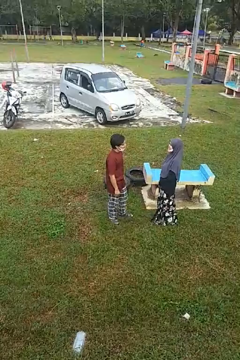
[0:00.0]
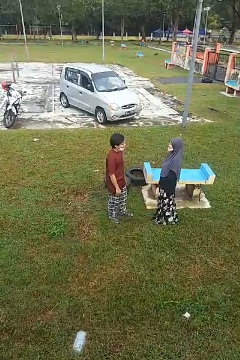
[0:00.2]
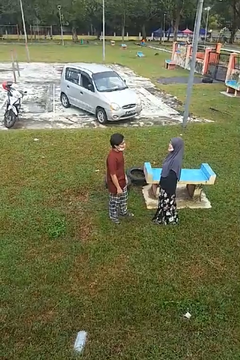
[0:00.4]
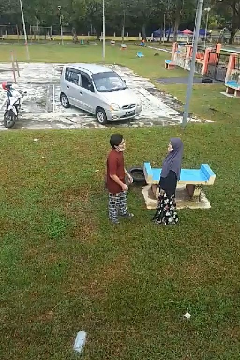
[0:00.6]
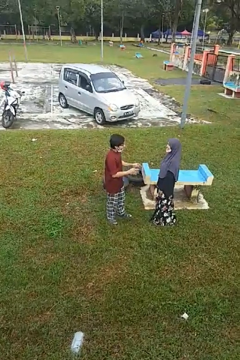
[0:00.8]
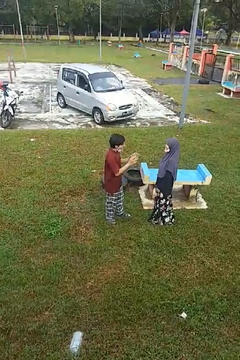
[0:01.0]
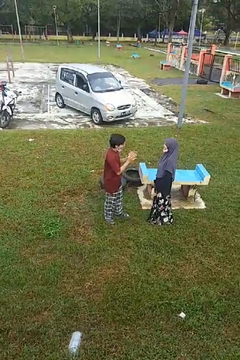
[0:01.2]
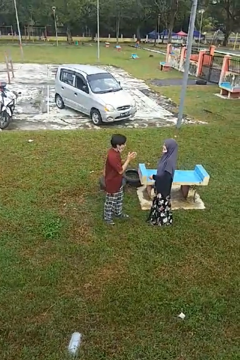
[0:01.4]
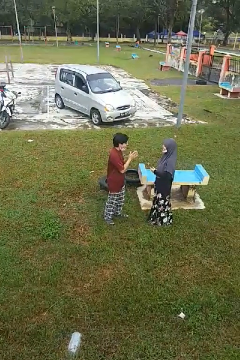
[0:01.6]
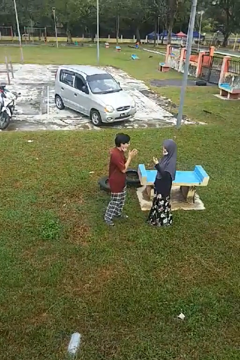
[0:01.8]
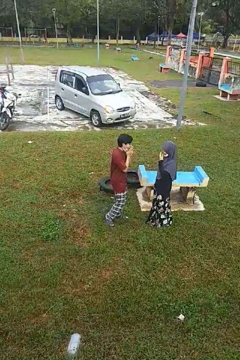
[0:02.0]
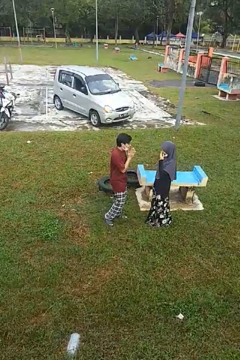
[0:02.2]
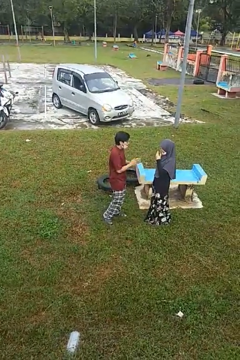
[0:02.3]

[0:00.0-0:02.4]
person laughs with person

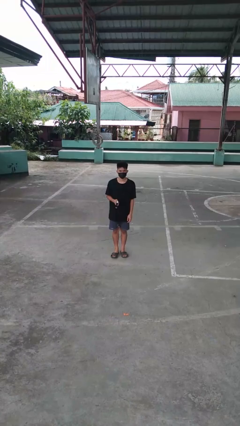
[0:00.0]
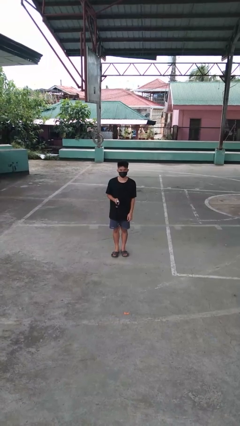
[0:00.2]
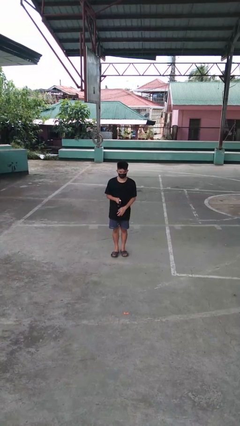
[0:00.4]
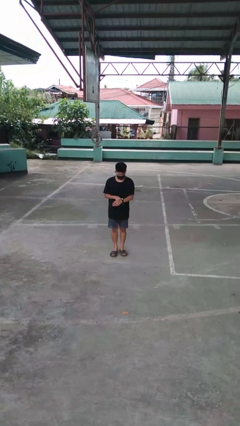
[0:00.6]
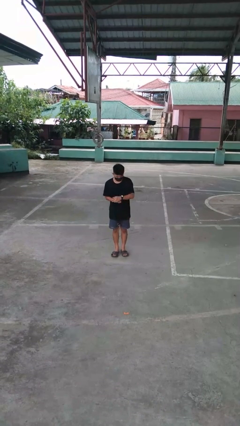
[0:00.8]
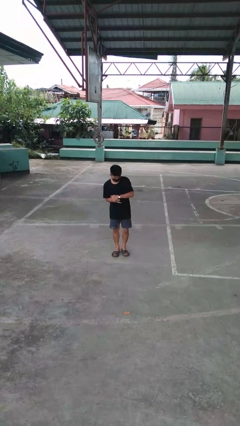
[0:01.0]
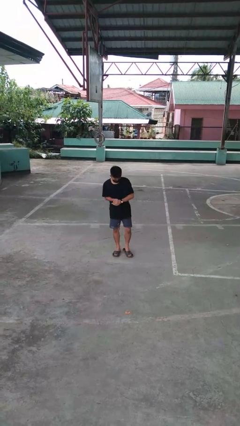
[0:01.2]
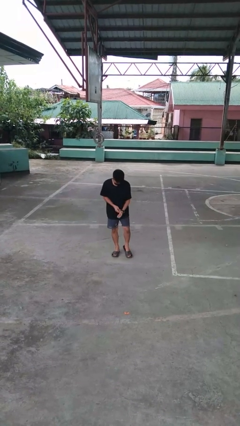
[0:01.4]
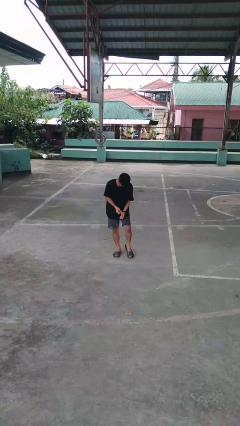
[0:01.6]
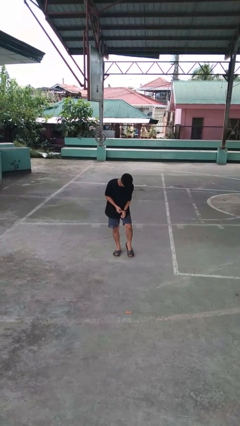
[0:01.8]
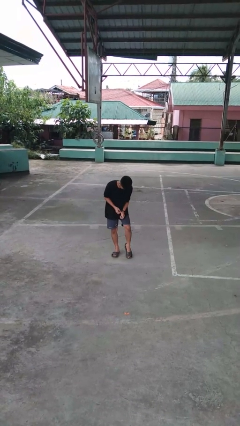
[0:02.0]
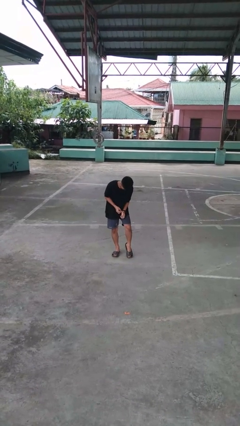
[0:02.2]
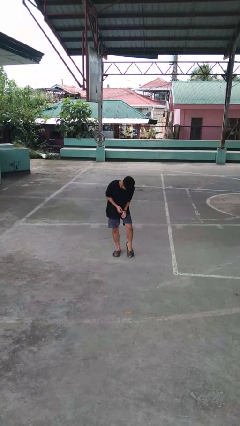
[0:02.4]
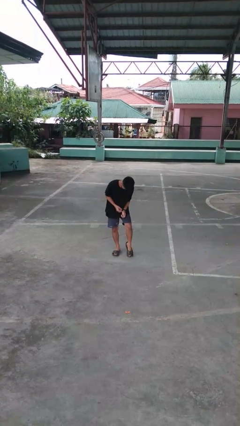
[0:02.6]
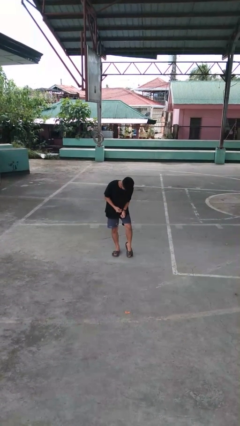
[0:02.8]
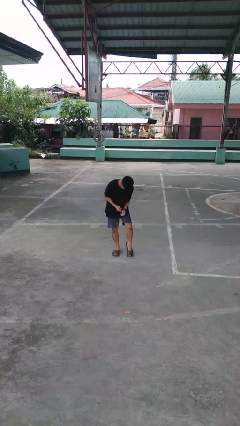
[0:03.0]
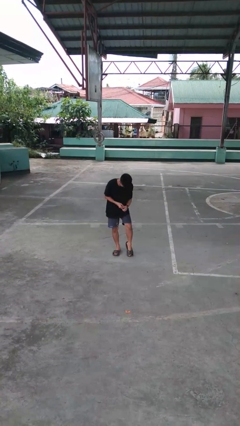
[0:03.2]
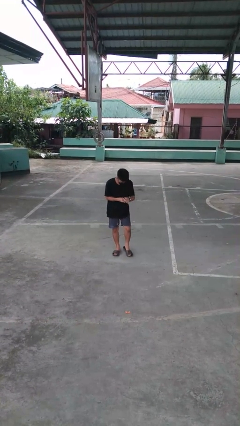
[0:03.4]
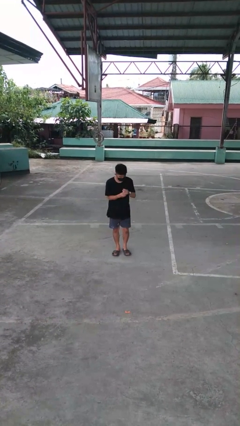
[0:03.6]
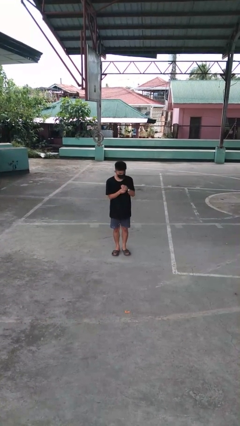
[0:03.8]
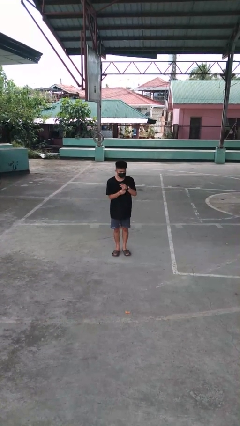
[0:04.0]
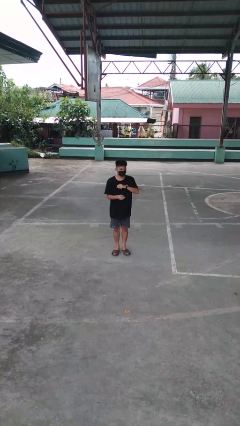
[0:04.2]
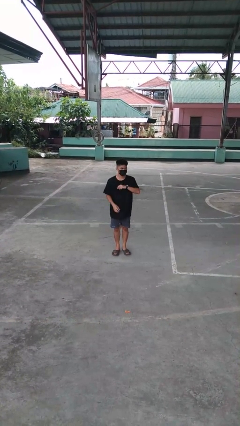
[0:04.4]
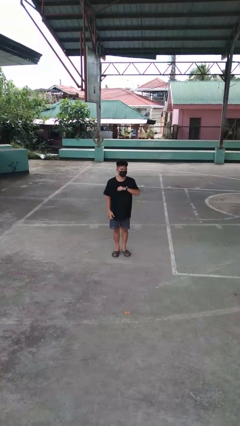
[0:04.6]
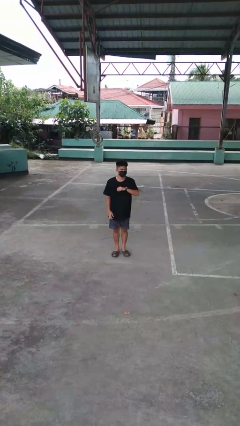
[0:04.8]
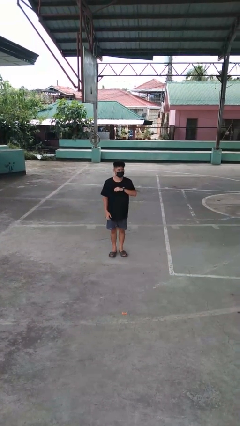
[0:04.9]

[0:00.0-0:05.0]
person puts on wristwatch

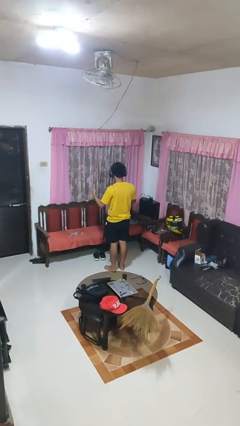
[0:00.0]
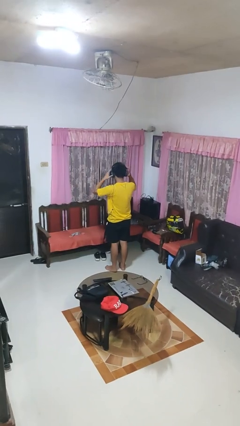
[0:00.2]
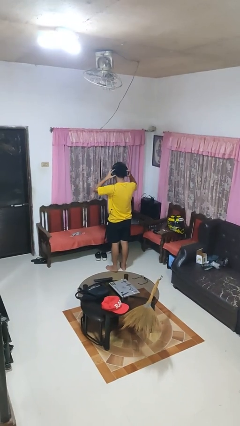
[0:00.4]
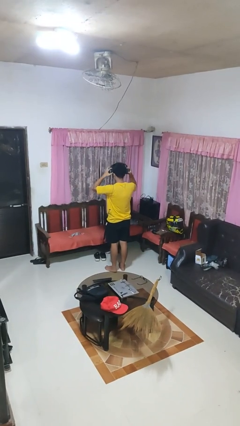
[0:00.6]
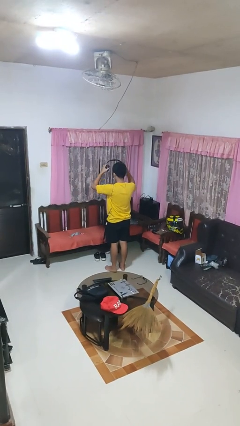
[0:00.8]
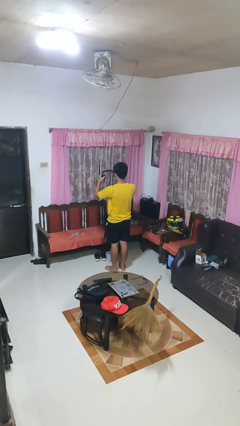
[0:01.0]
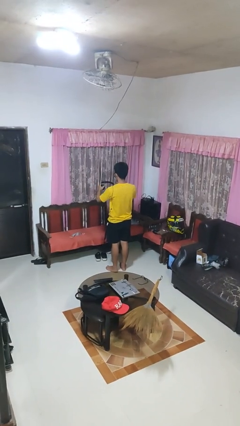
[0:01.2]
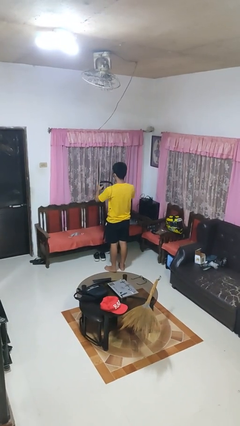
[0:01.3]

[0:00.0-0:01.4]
person takes off headphones

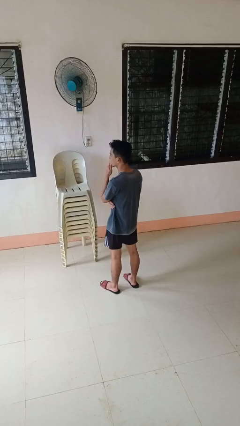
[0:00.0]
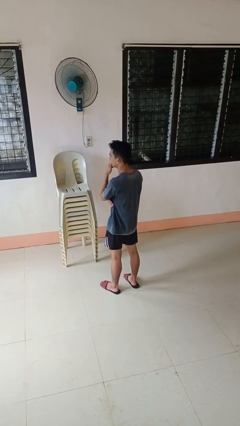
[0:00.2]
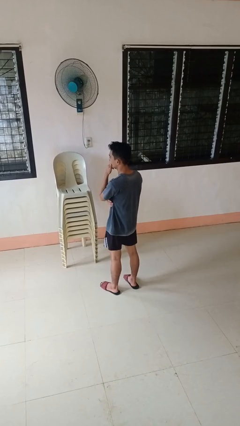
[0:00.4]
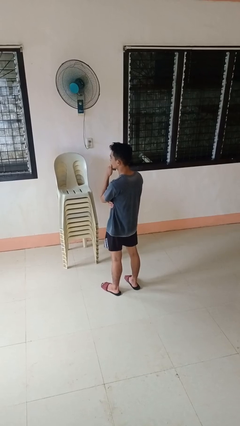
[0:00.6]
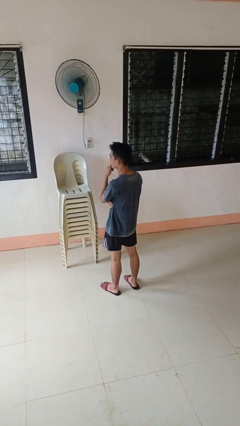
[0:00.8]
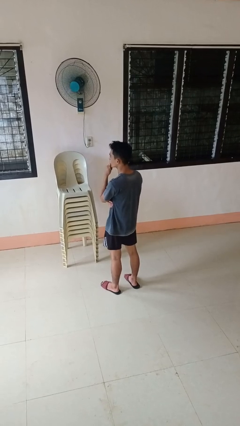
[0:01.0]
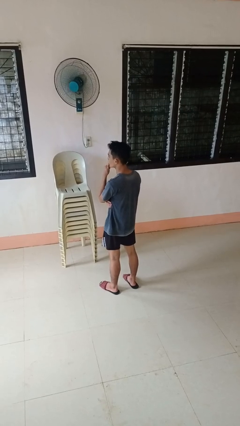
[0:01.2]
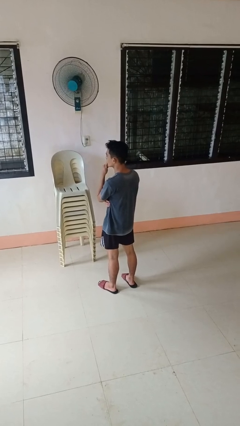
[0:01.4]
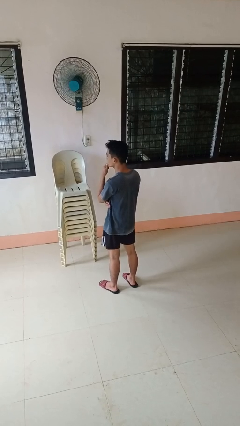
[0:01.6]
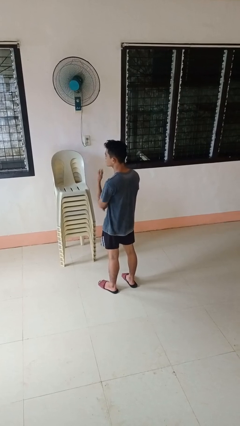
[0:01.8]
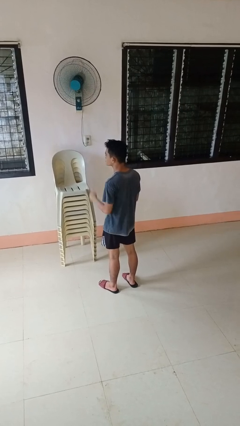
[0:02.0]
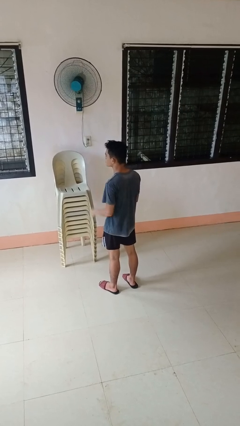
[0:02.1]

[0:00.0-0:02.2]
person strokes chin

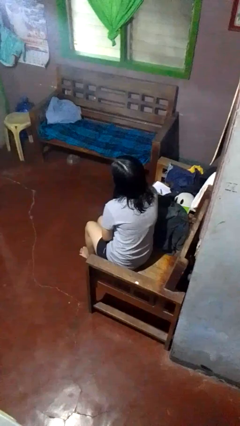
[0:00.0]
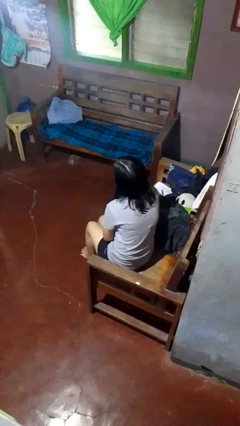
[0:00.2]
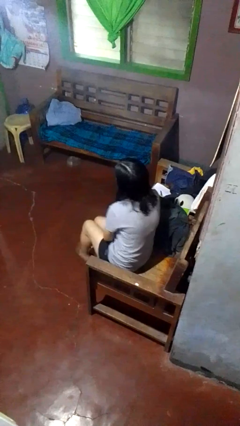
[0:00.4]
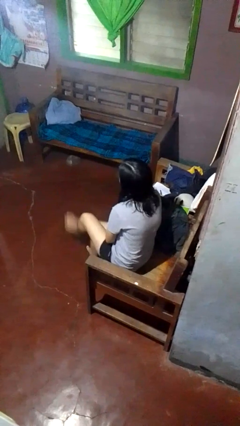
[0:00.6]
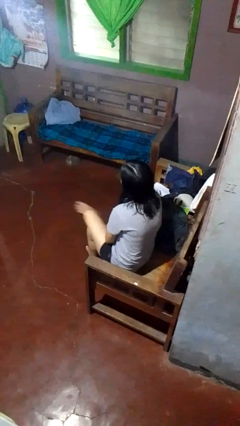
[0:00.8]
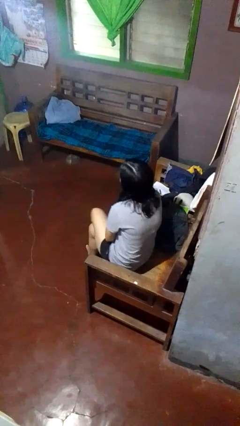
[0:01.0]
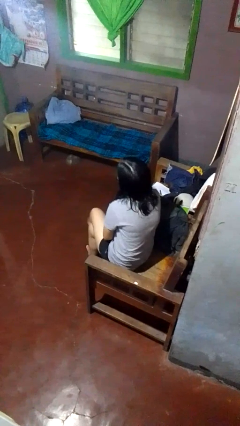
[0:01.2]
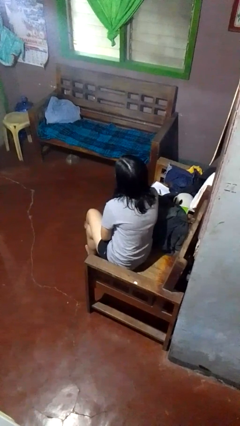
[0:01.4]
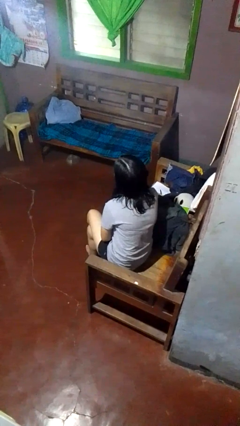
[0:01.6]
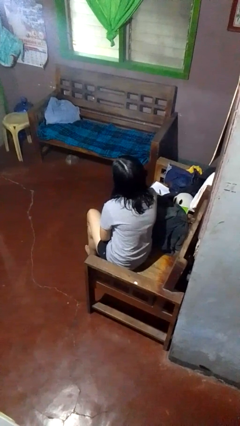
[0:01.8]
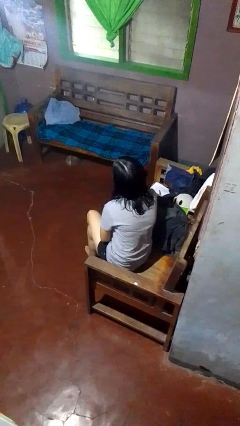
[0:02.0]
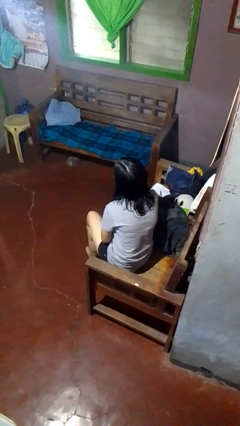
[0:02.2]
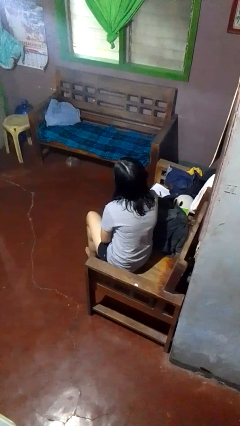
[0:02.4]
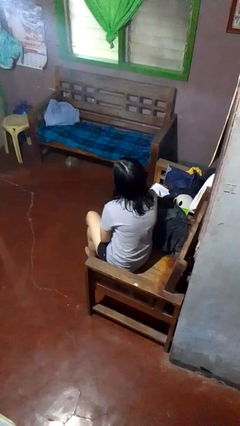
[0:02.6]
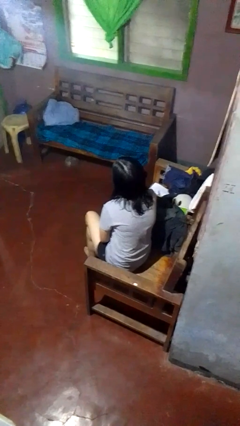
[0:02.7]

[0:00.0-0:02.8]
person crosses legs

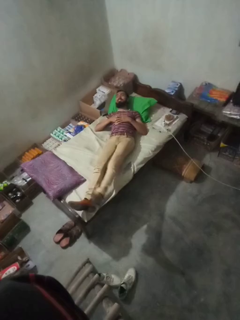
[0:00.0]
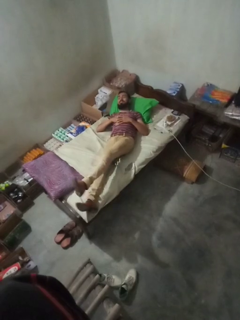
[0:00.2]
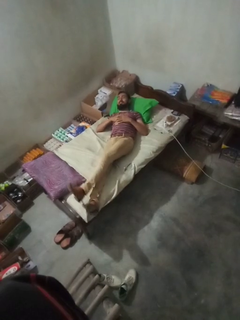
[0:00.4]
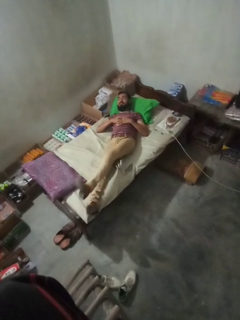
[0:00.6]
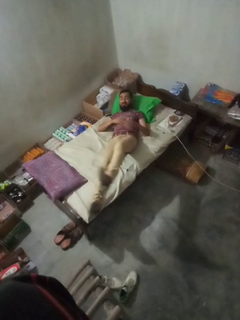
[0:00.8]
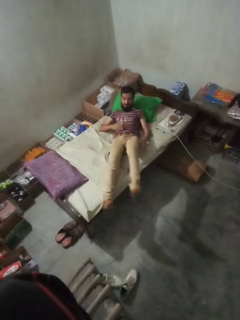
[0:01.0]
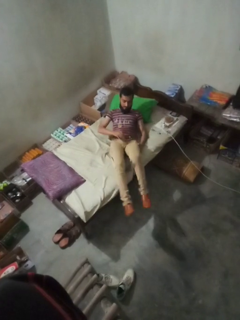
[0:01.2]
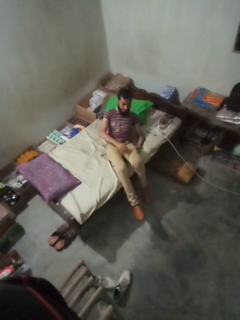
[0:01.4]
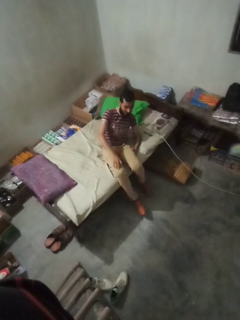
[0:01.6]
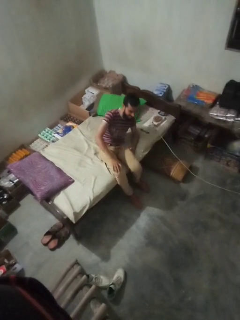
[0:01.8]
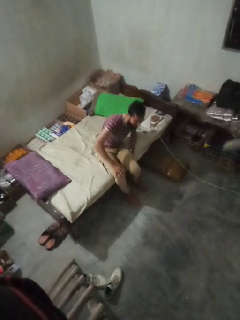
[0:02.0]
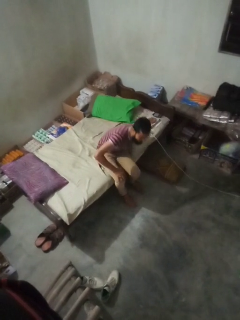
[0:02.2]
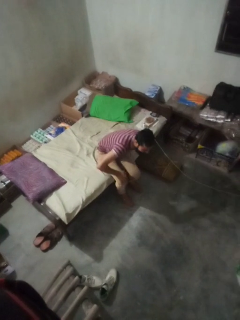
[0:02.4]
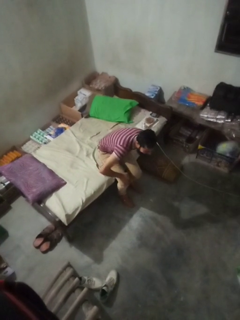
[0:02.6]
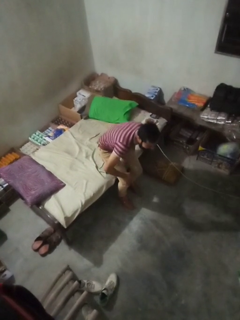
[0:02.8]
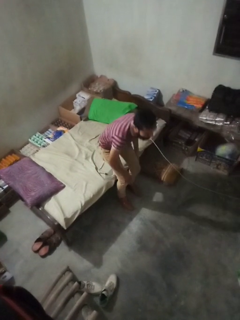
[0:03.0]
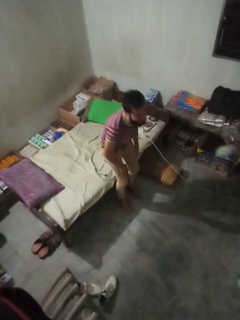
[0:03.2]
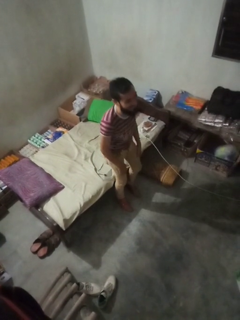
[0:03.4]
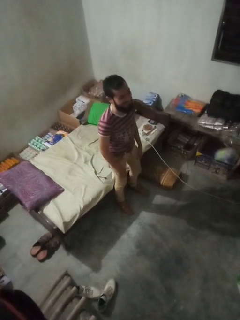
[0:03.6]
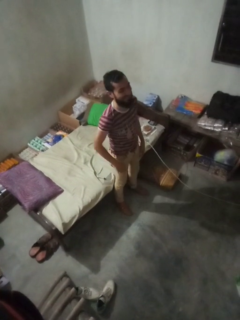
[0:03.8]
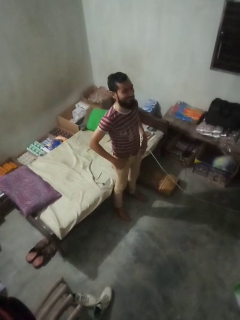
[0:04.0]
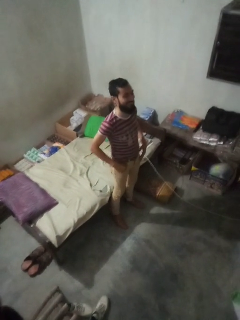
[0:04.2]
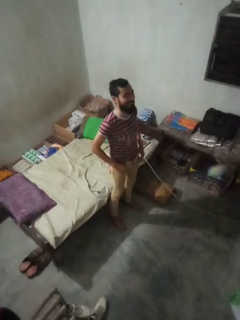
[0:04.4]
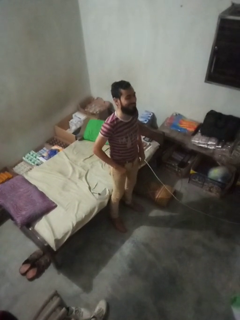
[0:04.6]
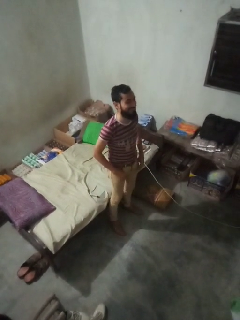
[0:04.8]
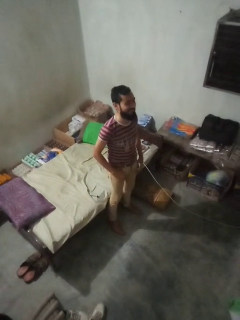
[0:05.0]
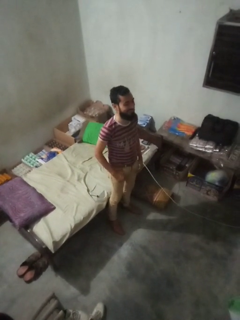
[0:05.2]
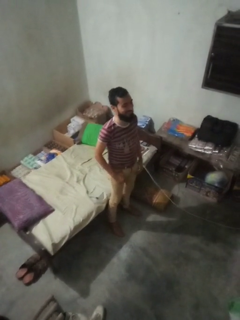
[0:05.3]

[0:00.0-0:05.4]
person stands up
